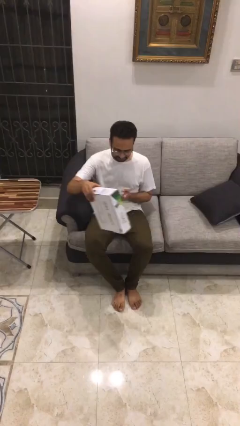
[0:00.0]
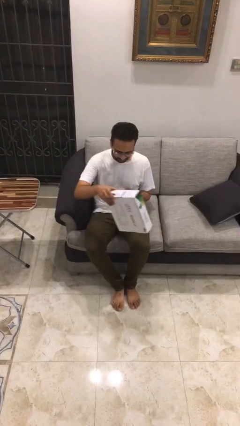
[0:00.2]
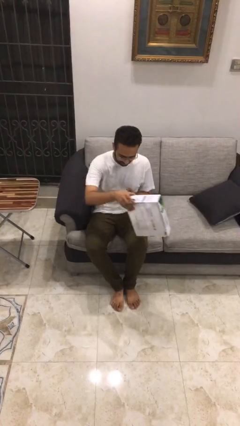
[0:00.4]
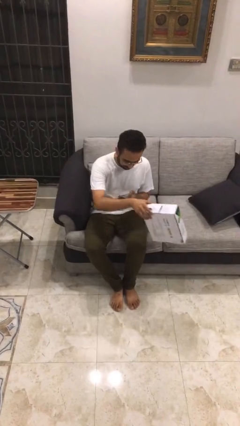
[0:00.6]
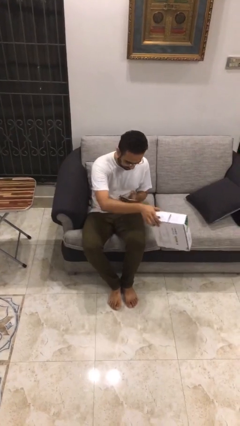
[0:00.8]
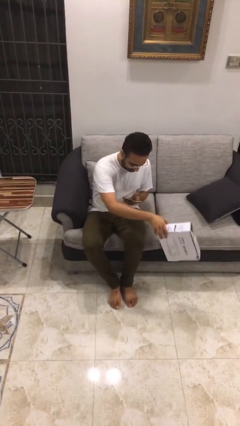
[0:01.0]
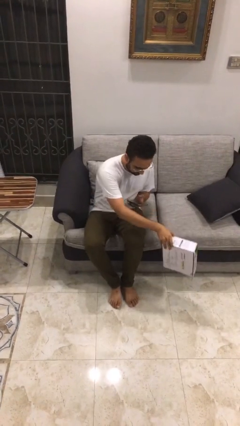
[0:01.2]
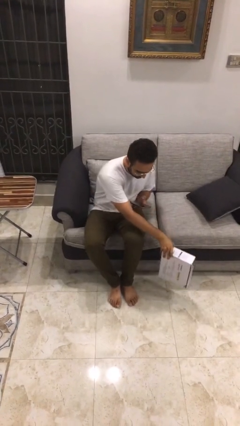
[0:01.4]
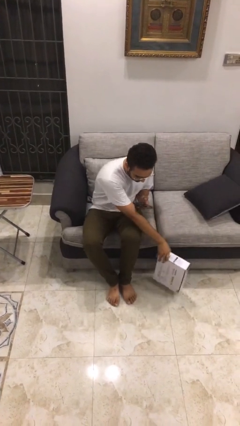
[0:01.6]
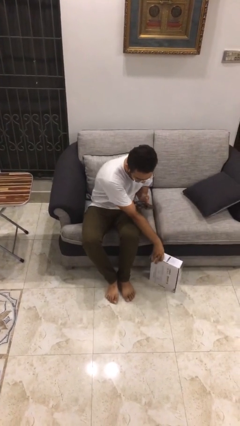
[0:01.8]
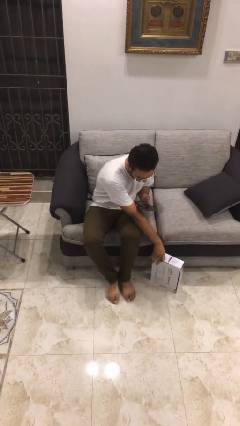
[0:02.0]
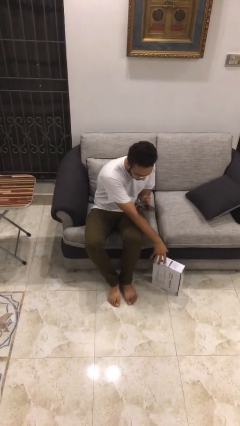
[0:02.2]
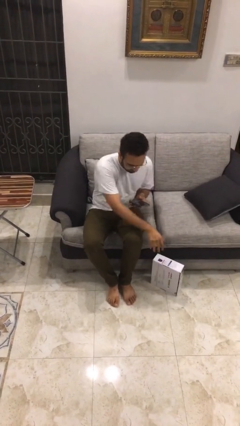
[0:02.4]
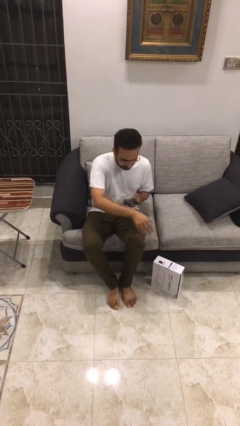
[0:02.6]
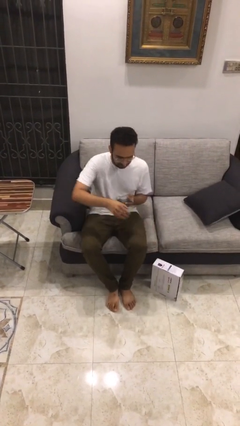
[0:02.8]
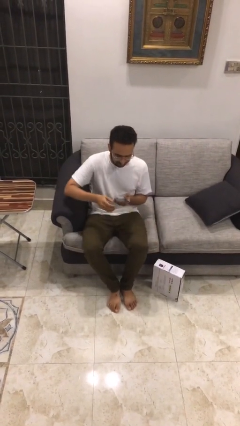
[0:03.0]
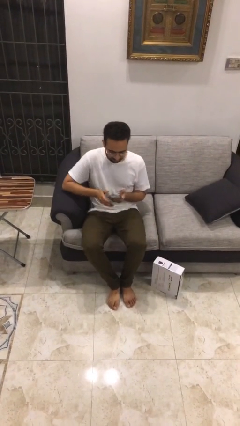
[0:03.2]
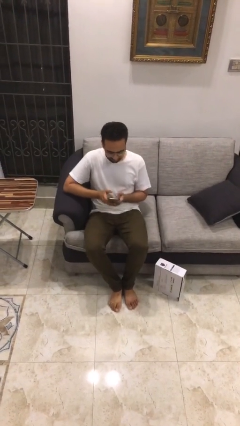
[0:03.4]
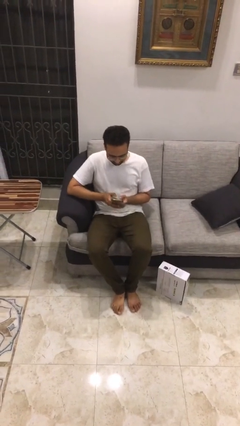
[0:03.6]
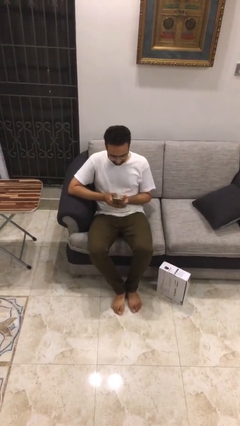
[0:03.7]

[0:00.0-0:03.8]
person puts down object on floor

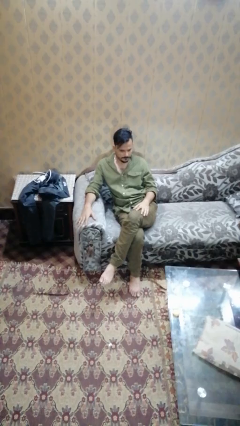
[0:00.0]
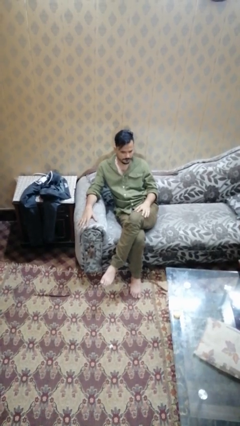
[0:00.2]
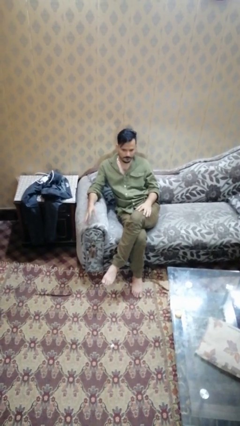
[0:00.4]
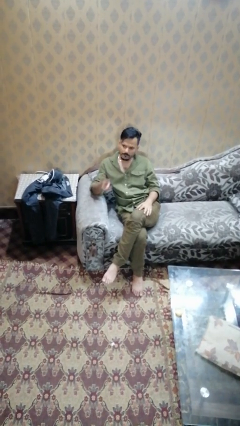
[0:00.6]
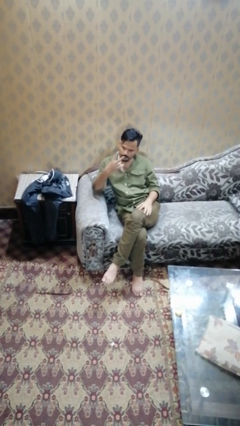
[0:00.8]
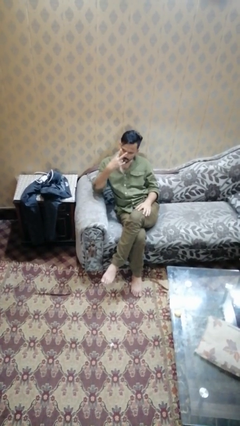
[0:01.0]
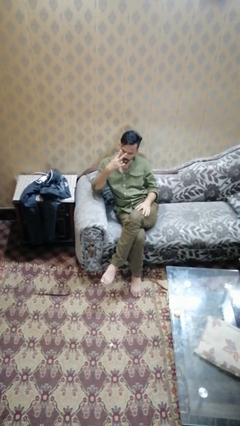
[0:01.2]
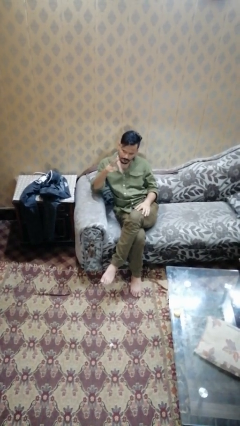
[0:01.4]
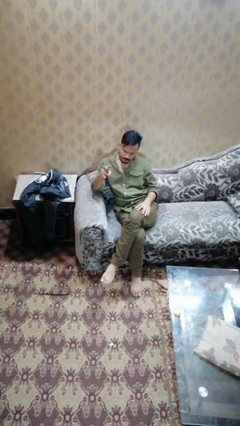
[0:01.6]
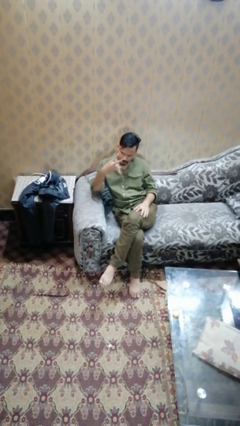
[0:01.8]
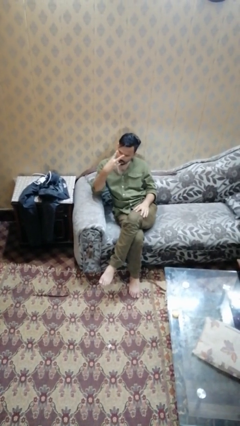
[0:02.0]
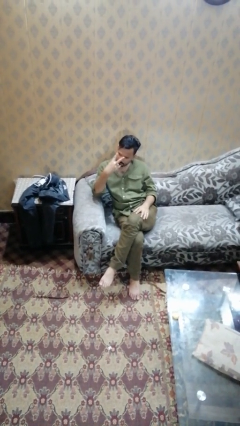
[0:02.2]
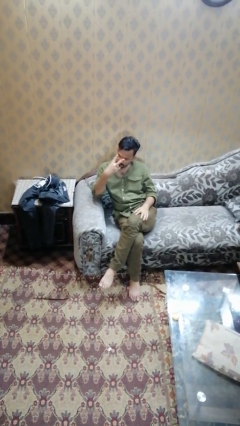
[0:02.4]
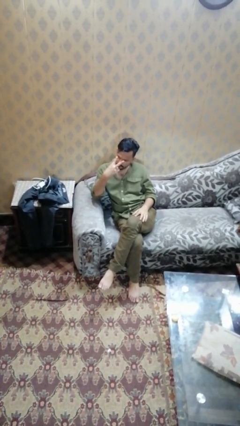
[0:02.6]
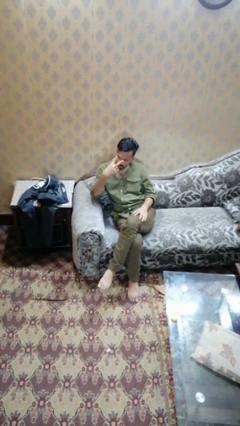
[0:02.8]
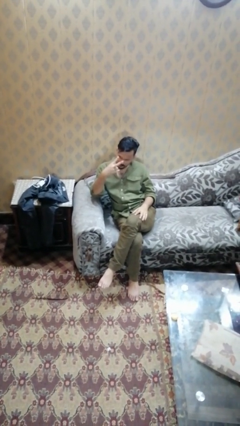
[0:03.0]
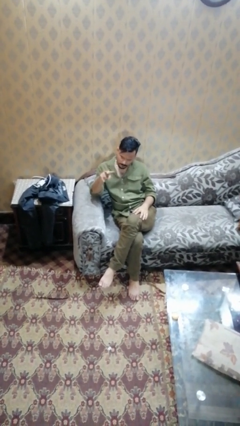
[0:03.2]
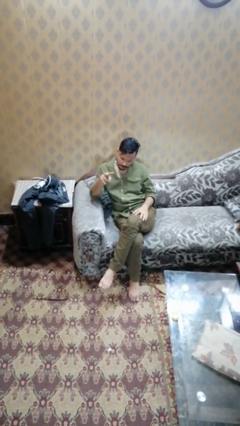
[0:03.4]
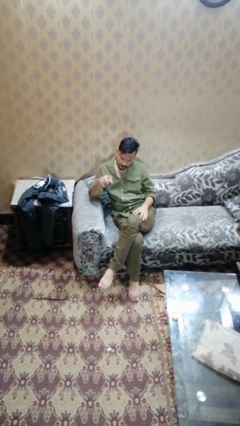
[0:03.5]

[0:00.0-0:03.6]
person gestures watch closely

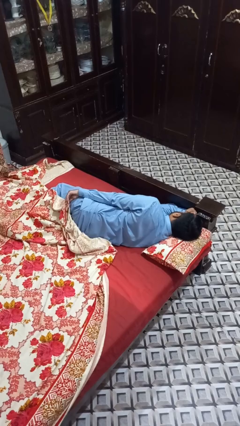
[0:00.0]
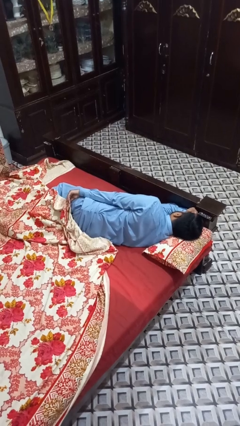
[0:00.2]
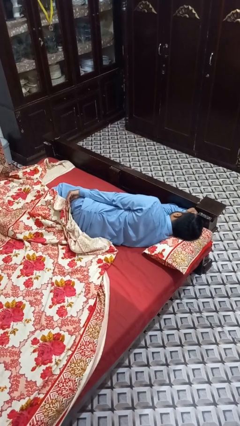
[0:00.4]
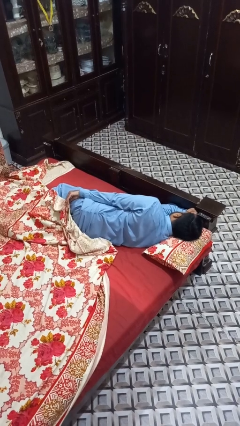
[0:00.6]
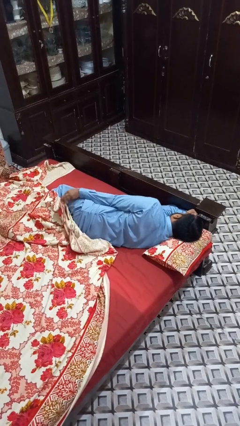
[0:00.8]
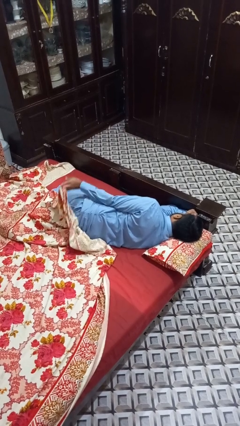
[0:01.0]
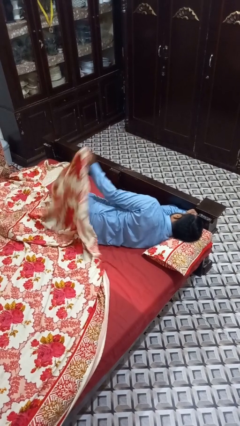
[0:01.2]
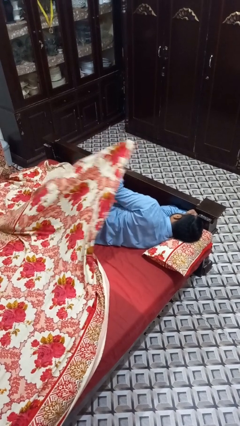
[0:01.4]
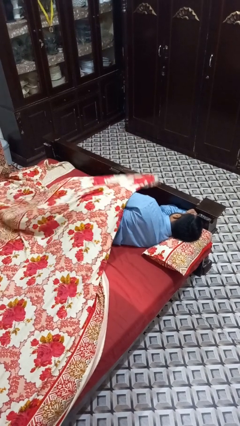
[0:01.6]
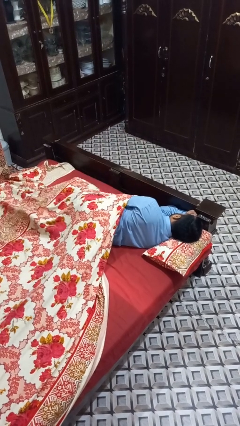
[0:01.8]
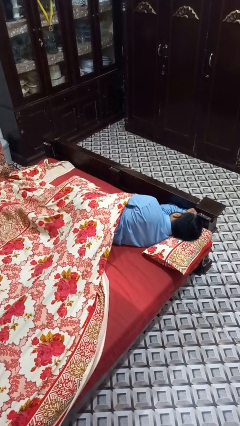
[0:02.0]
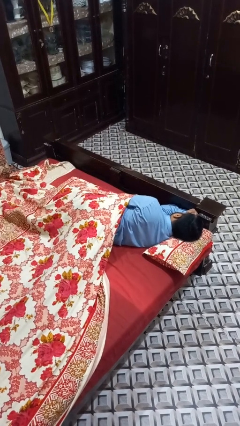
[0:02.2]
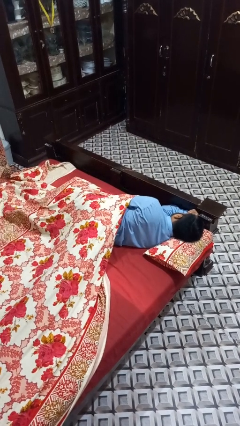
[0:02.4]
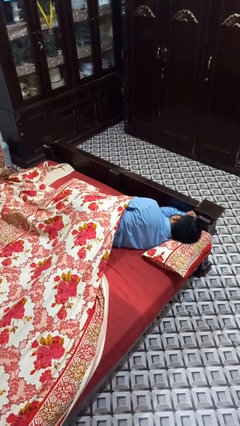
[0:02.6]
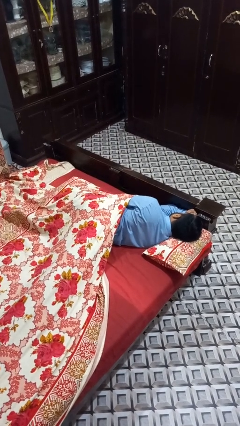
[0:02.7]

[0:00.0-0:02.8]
person covers with bedsheets

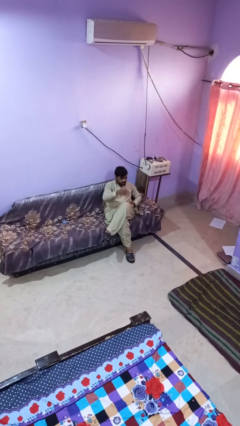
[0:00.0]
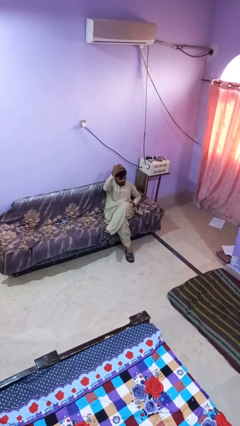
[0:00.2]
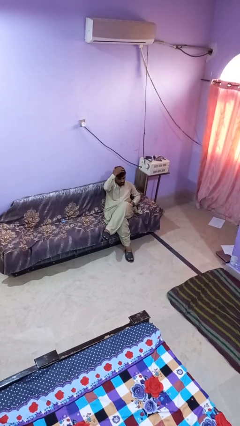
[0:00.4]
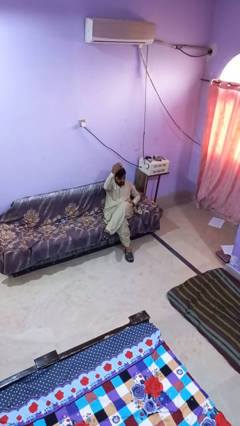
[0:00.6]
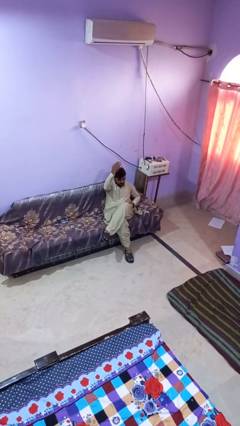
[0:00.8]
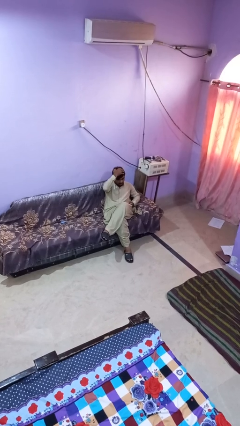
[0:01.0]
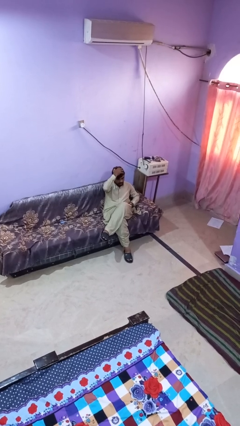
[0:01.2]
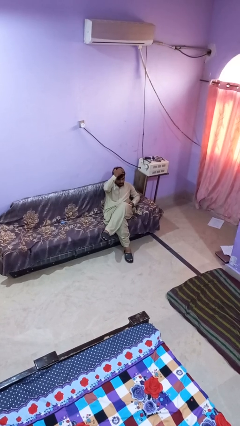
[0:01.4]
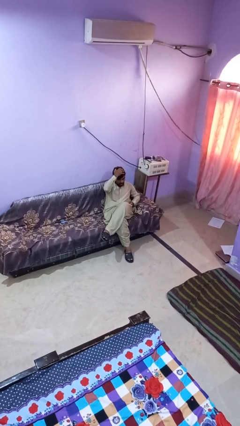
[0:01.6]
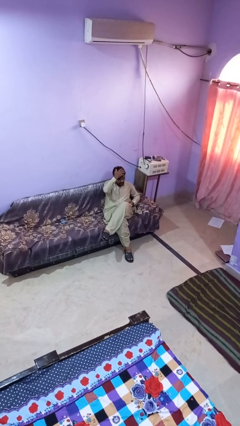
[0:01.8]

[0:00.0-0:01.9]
person pats head

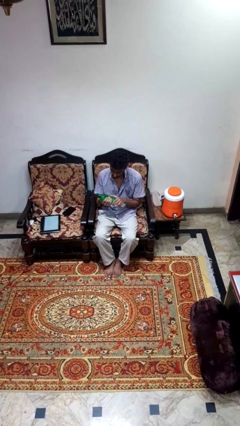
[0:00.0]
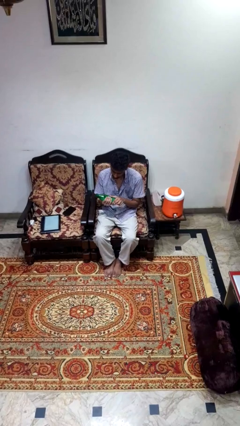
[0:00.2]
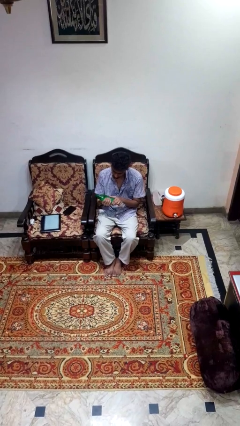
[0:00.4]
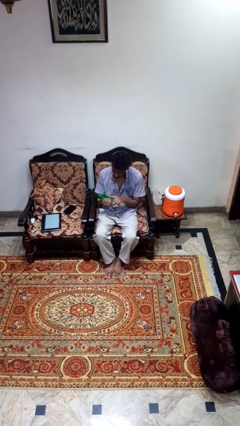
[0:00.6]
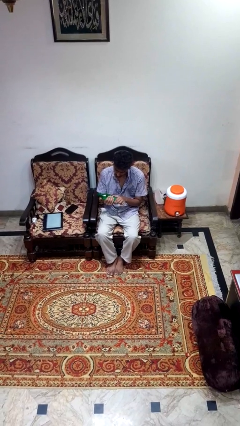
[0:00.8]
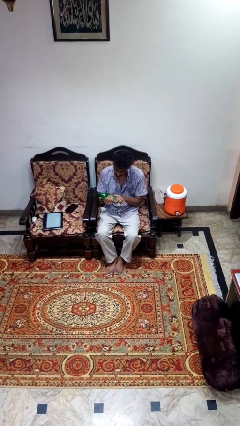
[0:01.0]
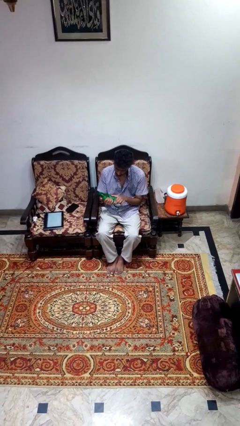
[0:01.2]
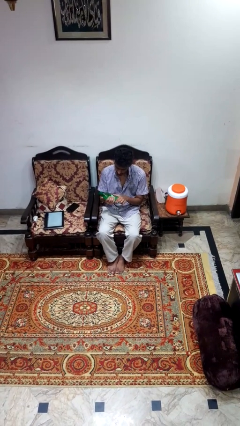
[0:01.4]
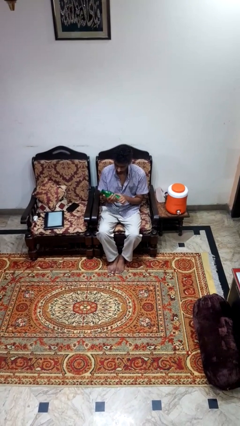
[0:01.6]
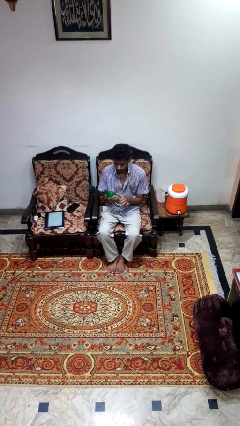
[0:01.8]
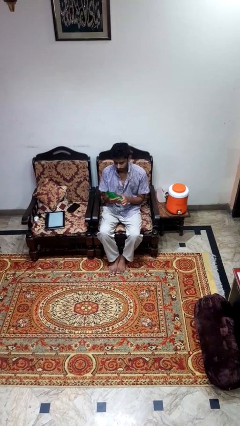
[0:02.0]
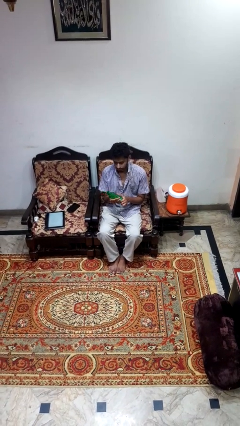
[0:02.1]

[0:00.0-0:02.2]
person squeezes object

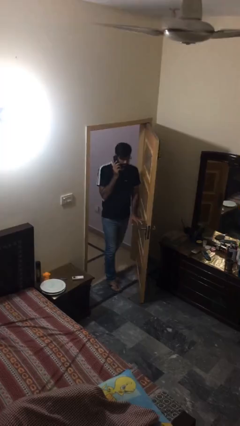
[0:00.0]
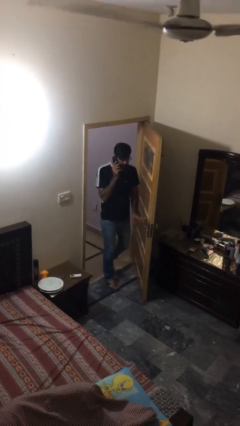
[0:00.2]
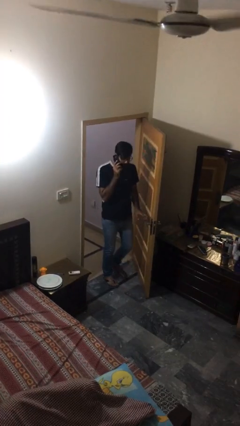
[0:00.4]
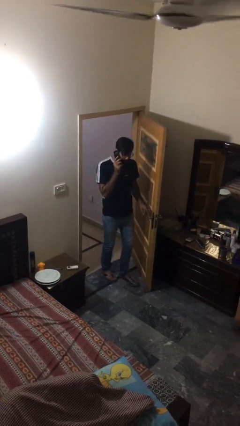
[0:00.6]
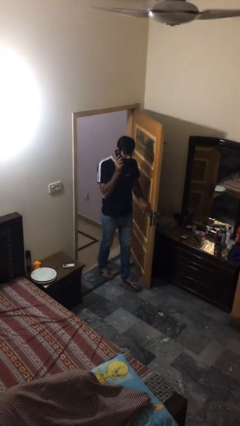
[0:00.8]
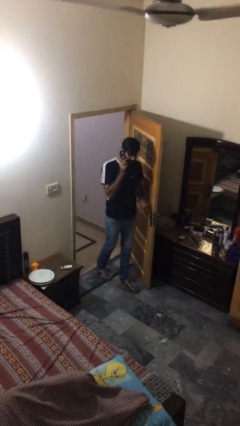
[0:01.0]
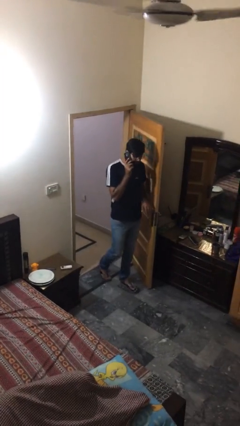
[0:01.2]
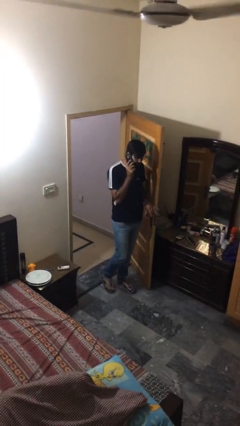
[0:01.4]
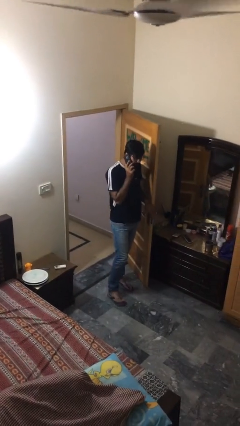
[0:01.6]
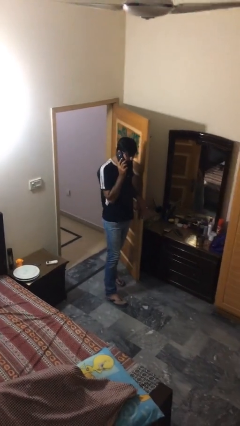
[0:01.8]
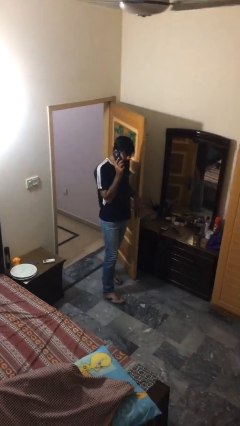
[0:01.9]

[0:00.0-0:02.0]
person enters scene through structure

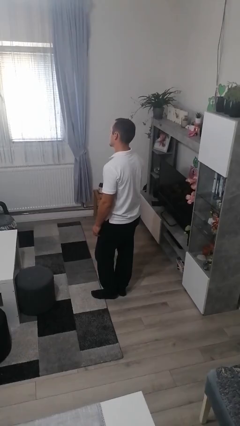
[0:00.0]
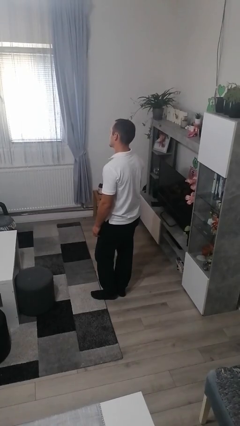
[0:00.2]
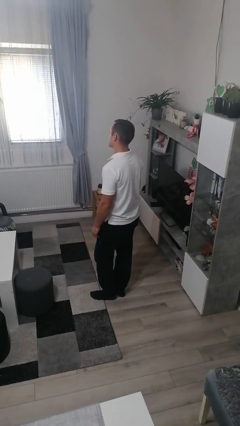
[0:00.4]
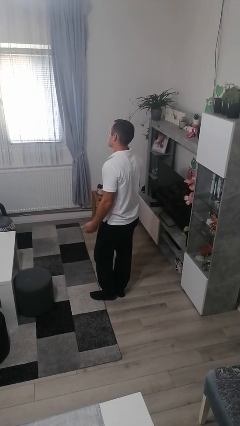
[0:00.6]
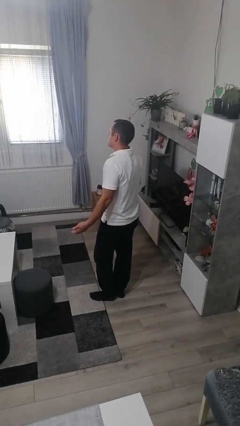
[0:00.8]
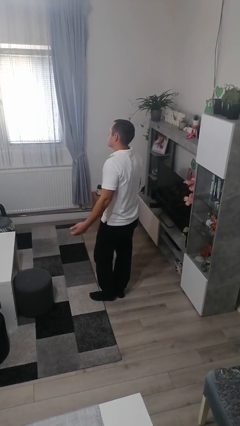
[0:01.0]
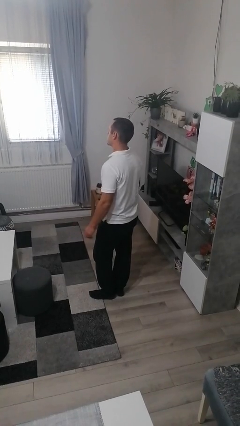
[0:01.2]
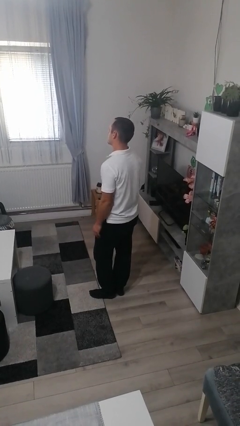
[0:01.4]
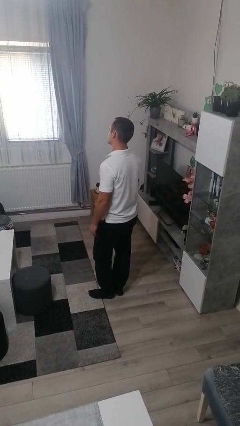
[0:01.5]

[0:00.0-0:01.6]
person shrugs
